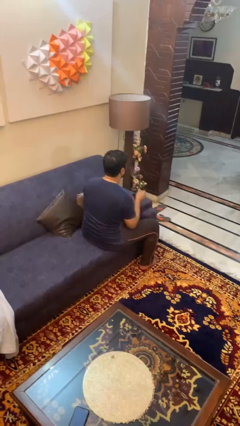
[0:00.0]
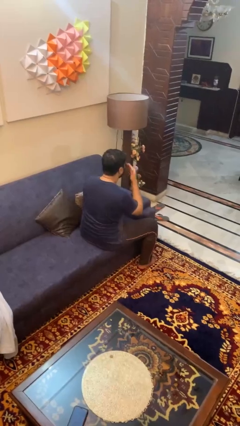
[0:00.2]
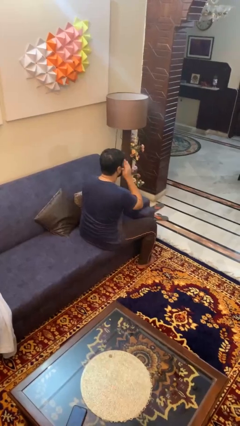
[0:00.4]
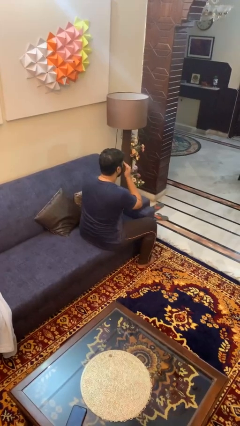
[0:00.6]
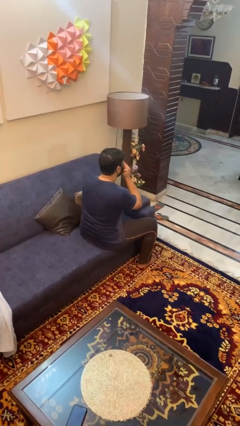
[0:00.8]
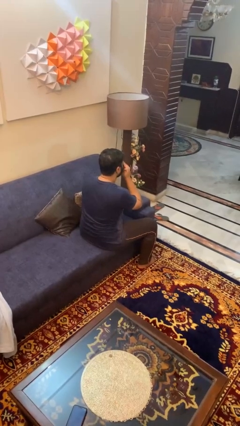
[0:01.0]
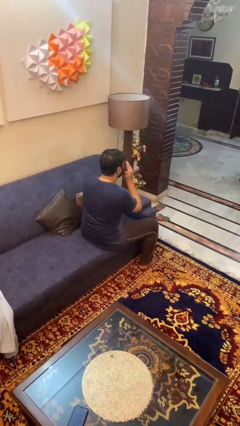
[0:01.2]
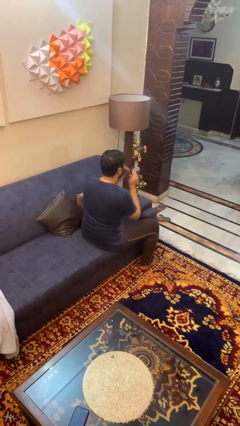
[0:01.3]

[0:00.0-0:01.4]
person rubs eyes

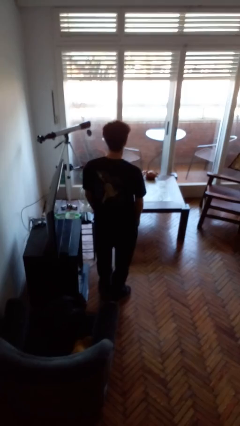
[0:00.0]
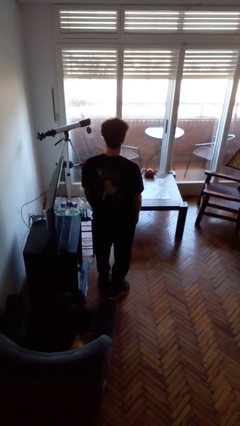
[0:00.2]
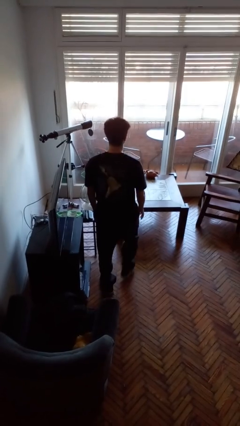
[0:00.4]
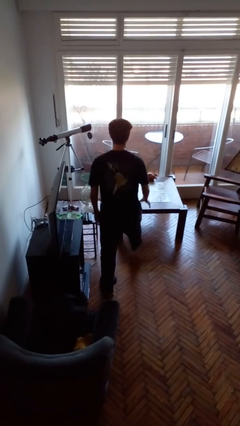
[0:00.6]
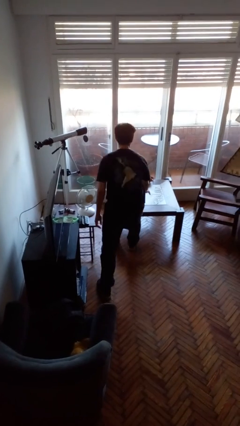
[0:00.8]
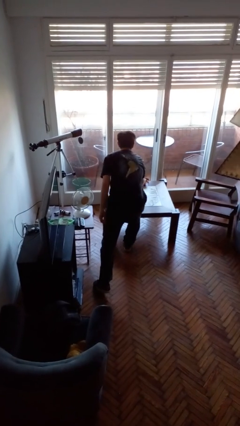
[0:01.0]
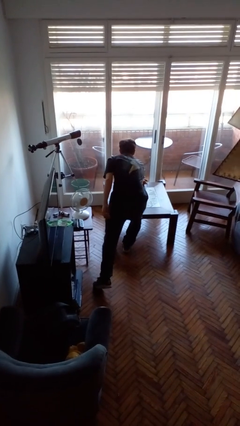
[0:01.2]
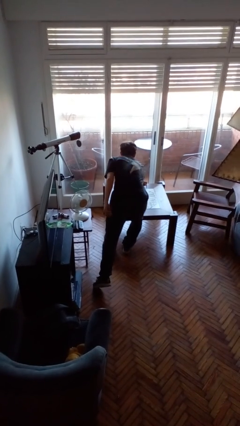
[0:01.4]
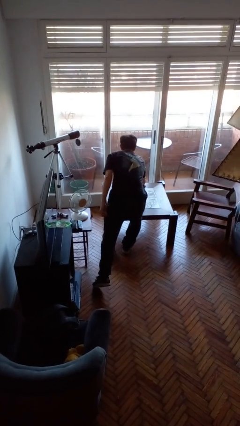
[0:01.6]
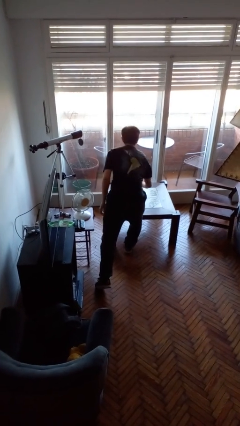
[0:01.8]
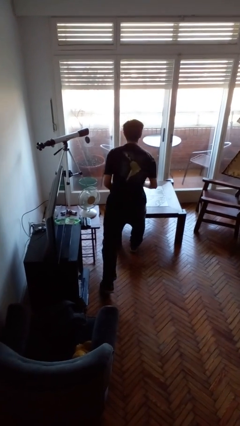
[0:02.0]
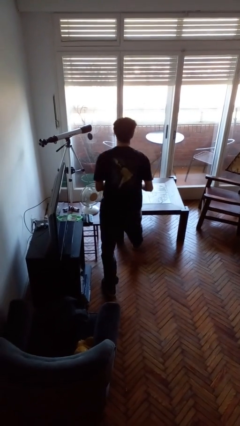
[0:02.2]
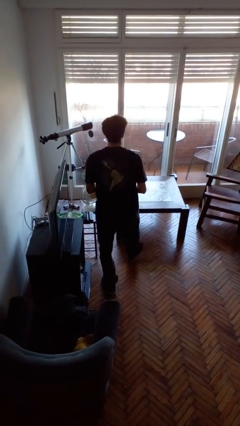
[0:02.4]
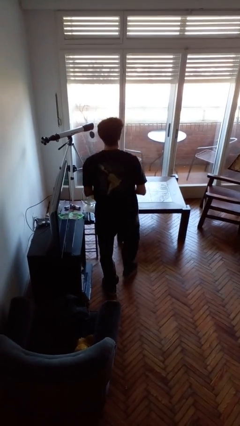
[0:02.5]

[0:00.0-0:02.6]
person picks up object from table

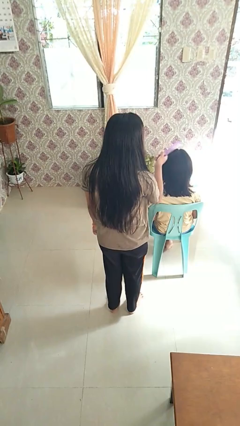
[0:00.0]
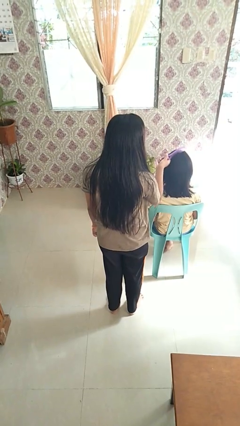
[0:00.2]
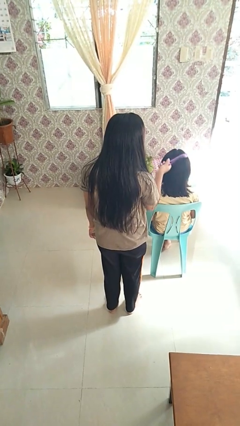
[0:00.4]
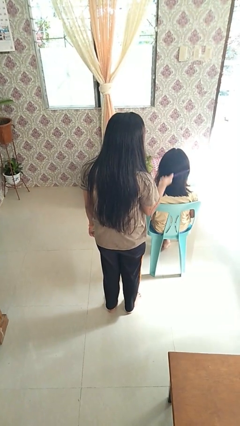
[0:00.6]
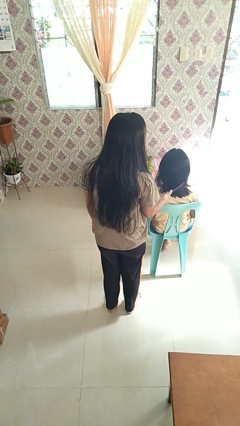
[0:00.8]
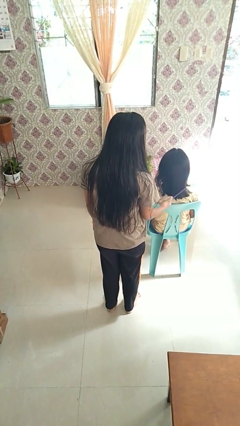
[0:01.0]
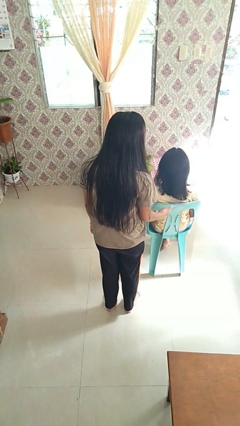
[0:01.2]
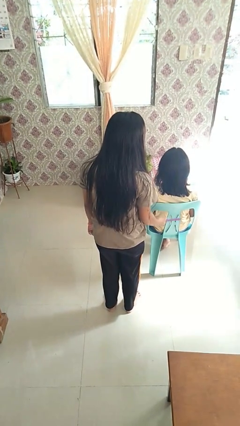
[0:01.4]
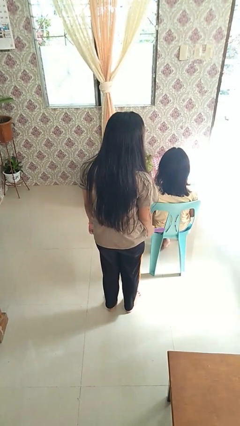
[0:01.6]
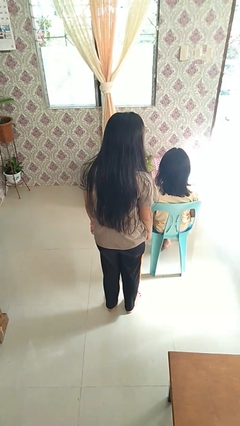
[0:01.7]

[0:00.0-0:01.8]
person brushes hair of person

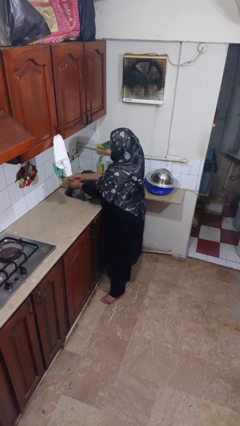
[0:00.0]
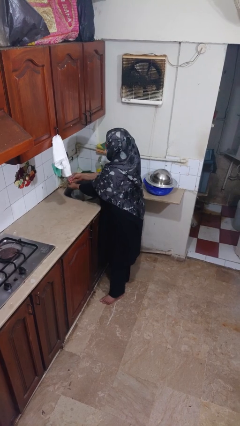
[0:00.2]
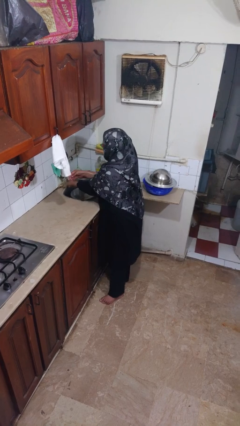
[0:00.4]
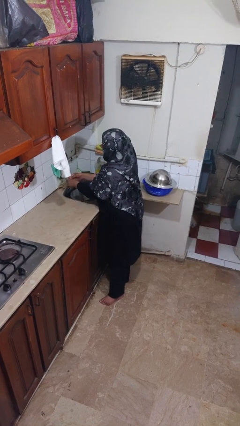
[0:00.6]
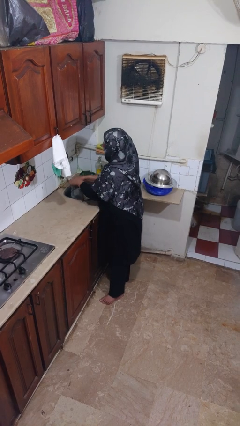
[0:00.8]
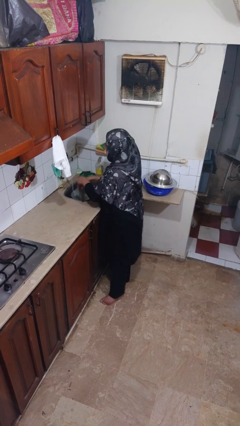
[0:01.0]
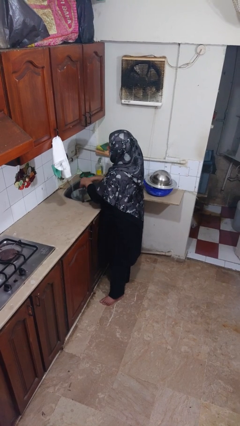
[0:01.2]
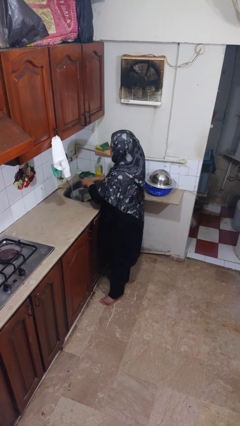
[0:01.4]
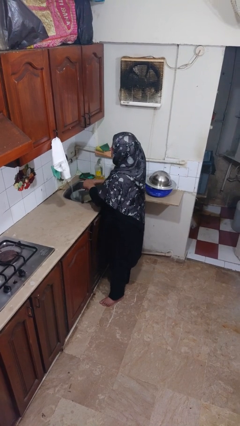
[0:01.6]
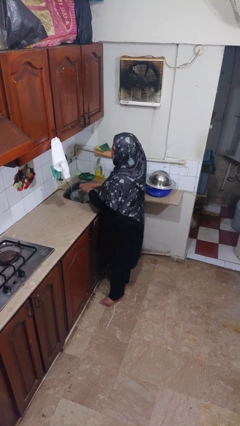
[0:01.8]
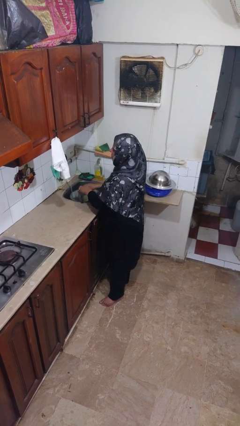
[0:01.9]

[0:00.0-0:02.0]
person washes hands

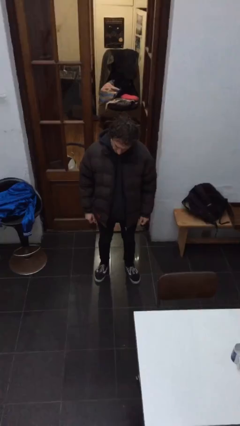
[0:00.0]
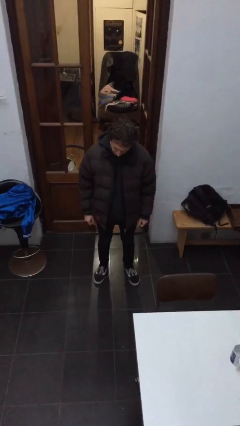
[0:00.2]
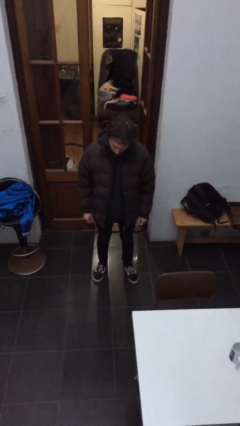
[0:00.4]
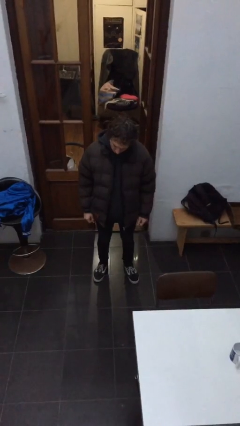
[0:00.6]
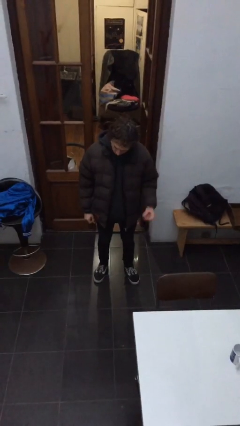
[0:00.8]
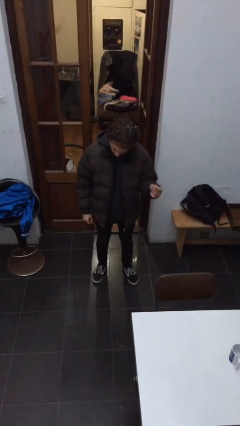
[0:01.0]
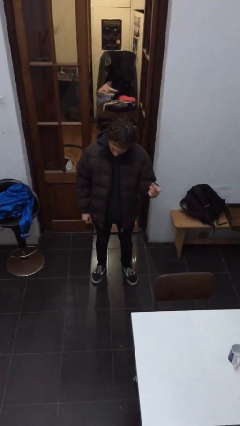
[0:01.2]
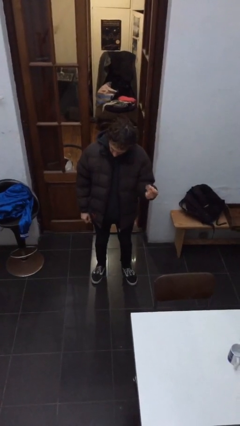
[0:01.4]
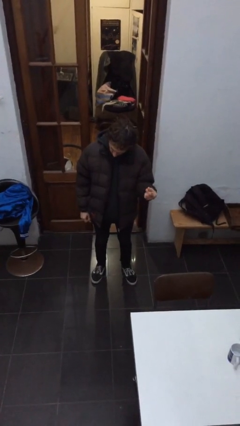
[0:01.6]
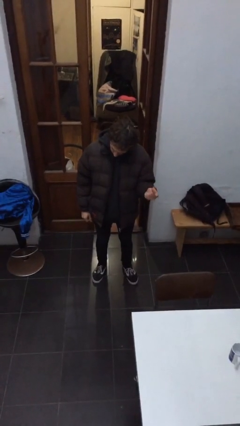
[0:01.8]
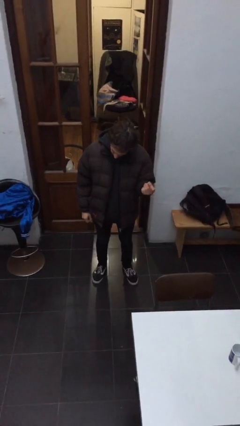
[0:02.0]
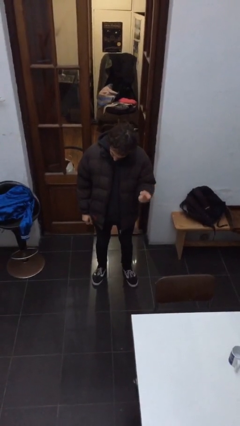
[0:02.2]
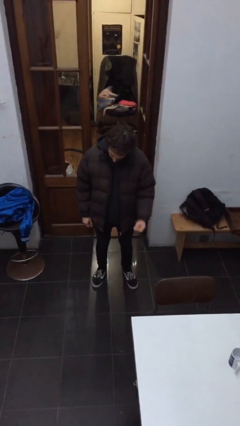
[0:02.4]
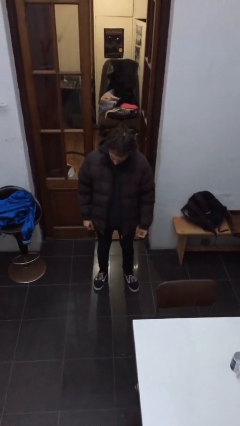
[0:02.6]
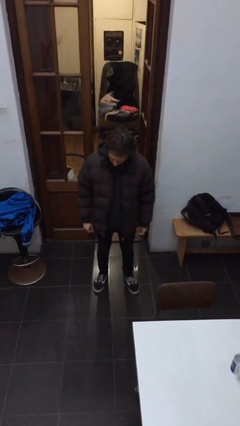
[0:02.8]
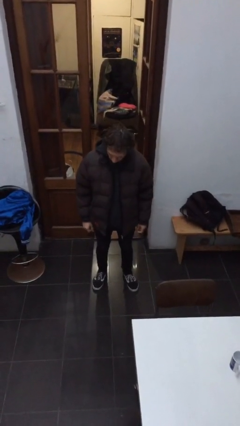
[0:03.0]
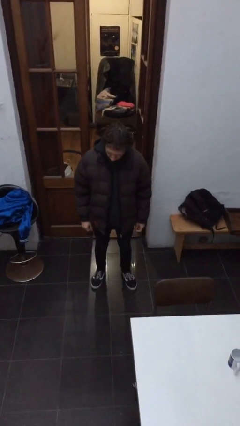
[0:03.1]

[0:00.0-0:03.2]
person snaps fingers

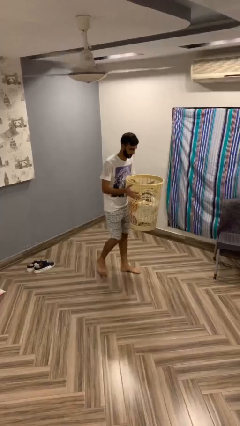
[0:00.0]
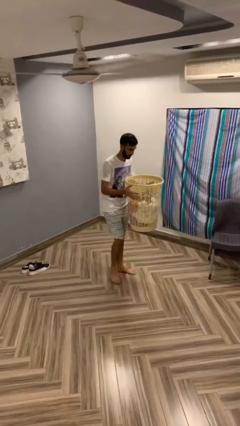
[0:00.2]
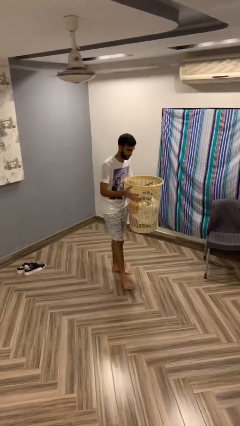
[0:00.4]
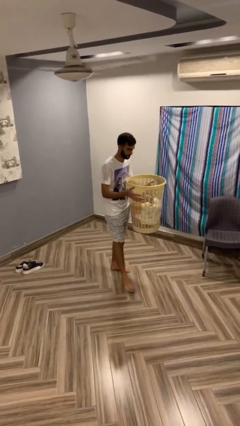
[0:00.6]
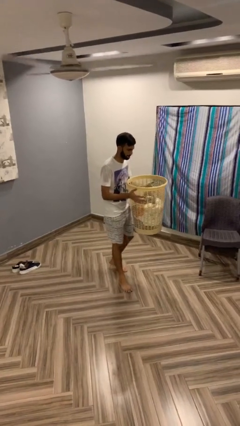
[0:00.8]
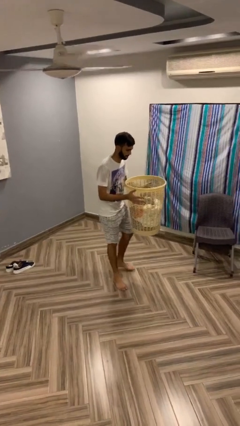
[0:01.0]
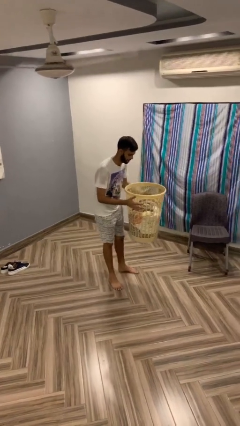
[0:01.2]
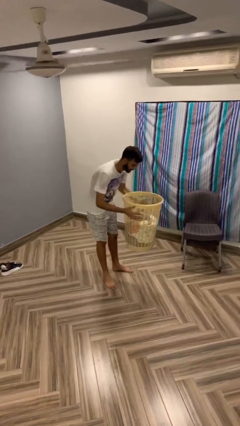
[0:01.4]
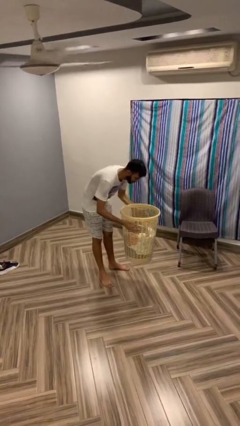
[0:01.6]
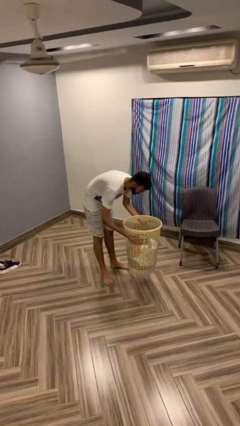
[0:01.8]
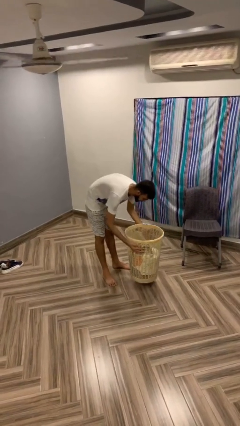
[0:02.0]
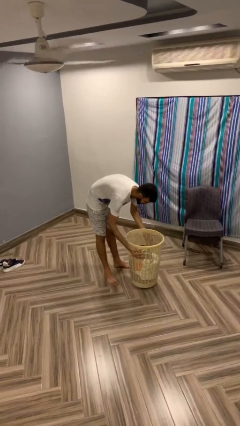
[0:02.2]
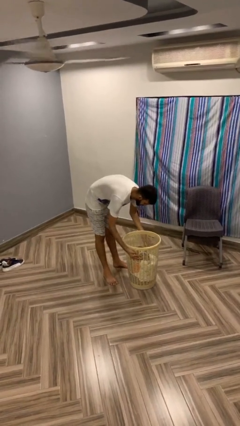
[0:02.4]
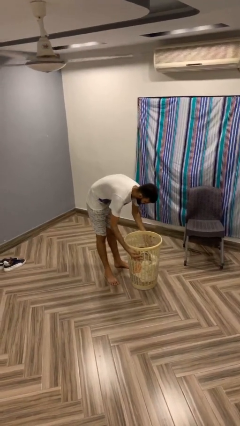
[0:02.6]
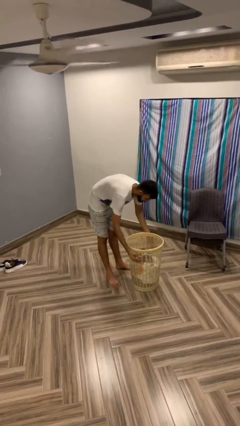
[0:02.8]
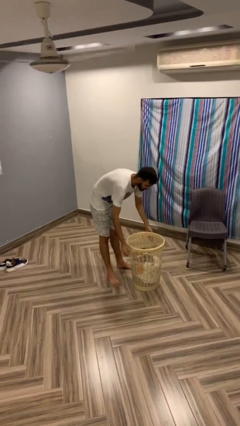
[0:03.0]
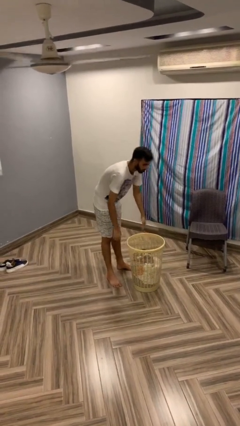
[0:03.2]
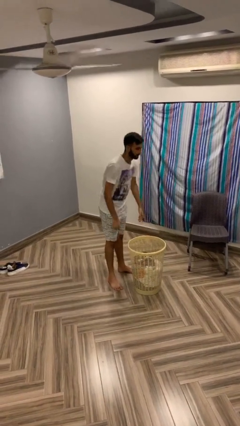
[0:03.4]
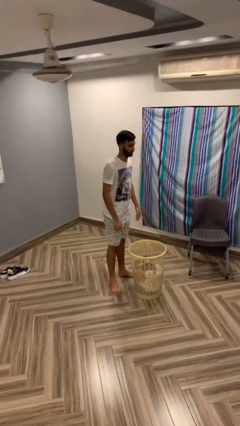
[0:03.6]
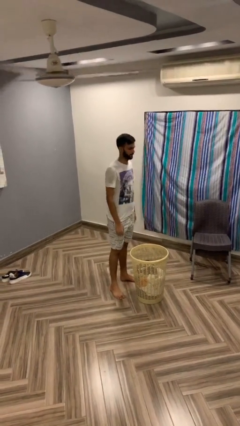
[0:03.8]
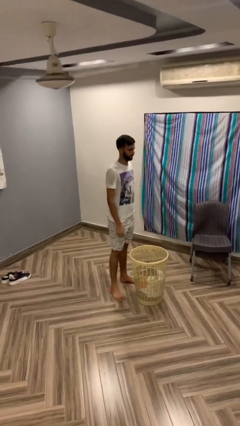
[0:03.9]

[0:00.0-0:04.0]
person puts down object on floor

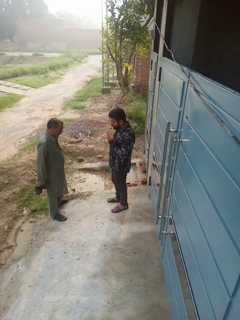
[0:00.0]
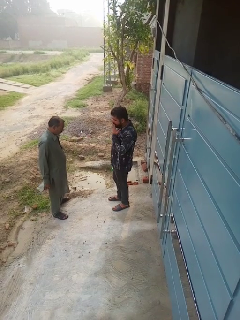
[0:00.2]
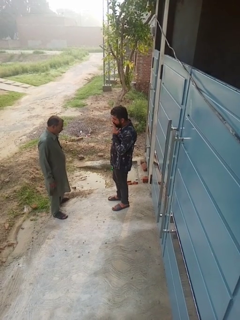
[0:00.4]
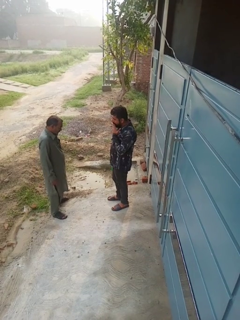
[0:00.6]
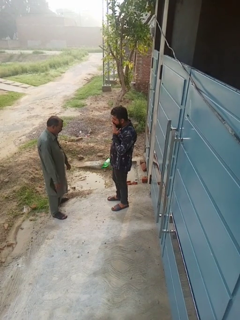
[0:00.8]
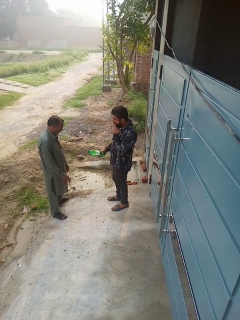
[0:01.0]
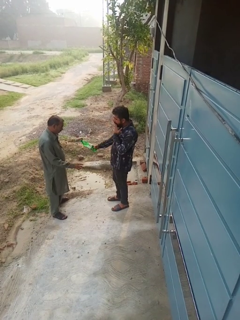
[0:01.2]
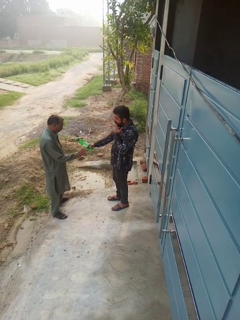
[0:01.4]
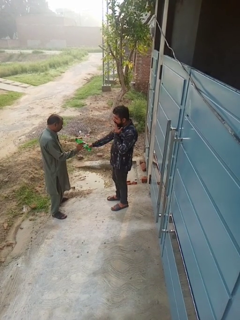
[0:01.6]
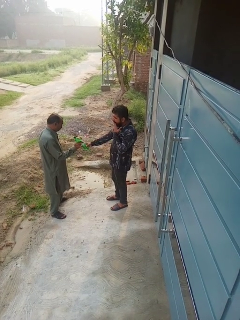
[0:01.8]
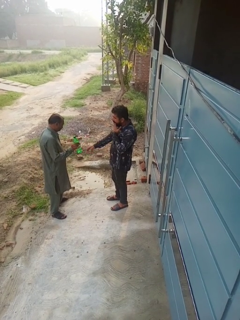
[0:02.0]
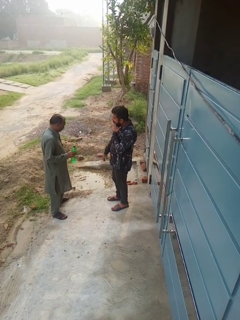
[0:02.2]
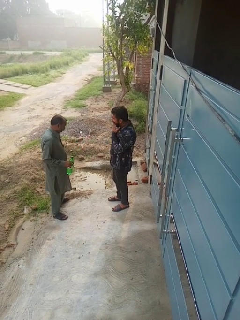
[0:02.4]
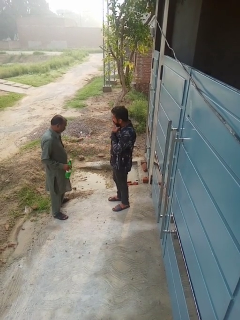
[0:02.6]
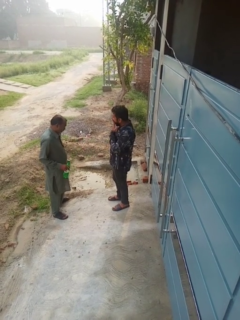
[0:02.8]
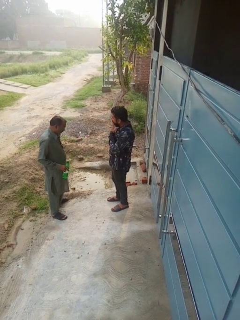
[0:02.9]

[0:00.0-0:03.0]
person transfers object to person
